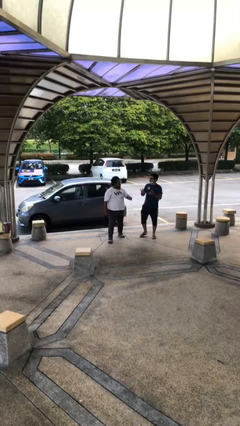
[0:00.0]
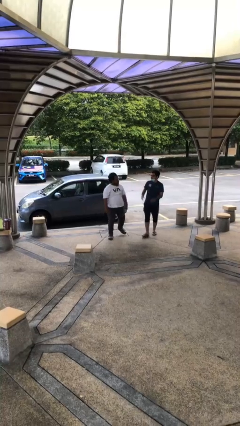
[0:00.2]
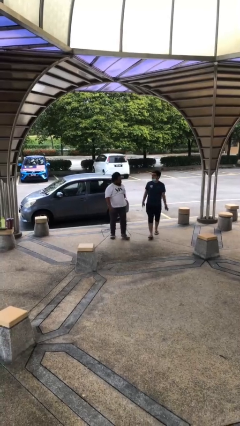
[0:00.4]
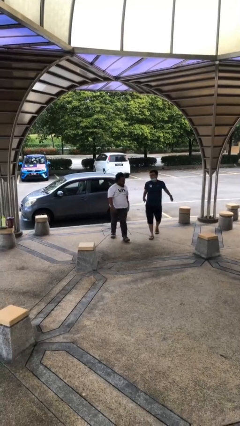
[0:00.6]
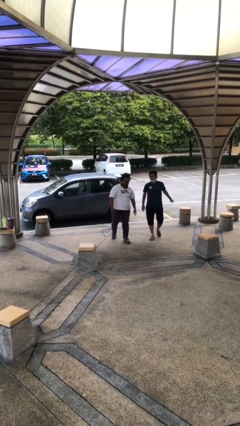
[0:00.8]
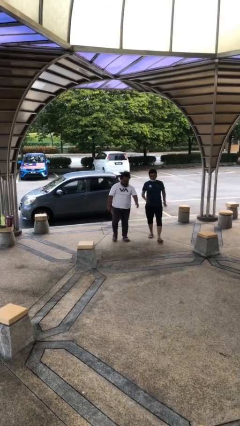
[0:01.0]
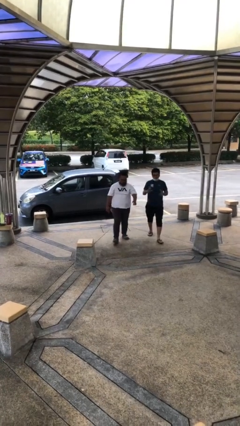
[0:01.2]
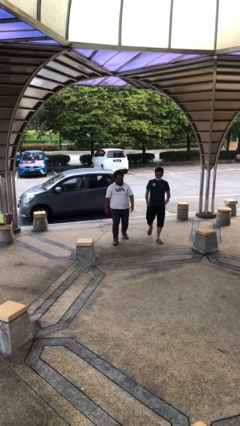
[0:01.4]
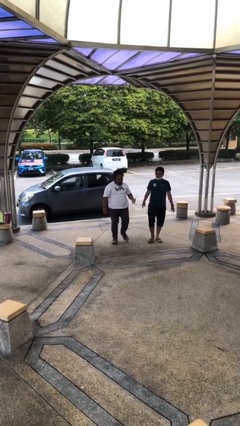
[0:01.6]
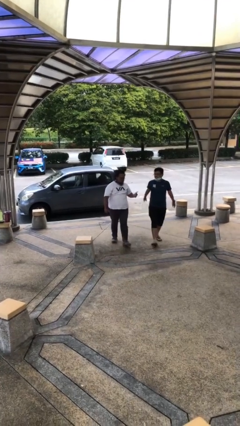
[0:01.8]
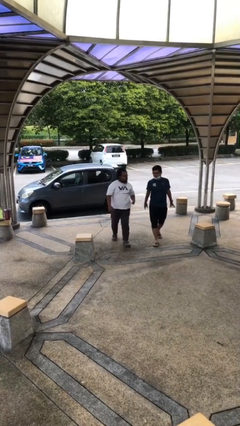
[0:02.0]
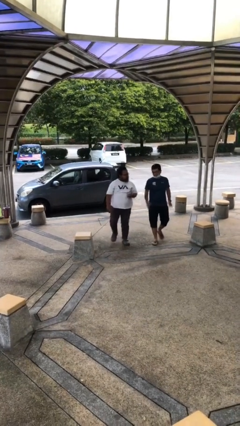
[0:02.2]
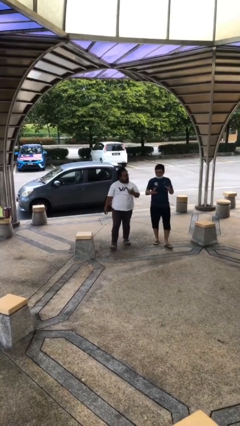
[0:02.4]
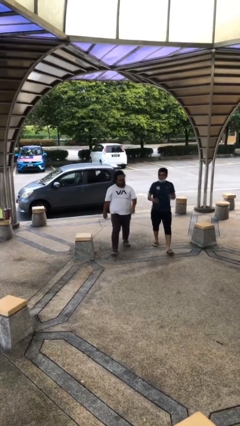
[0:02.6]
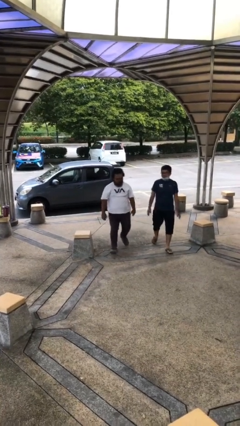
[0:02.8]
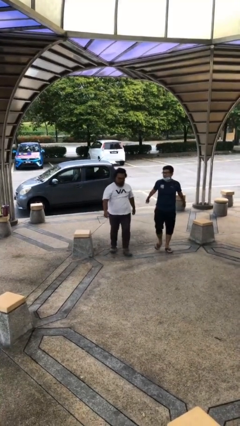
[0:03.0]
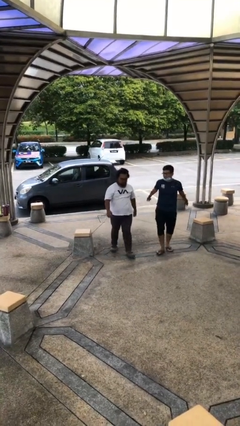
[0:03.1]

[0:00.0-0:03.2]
person talks to person

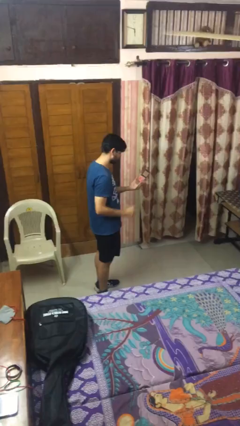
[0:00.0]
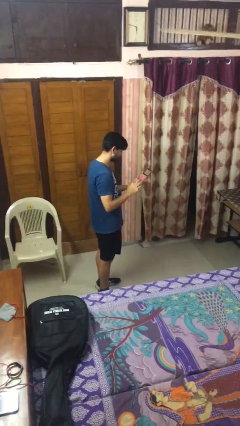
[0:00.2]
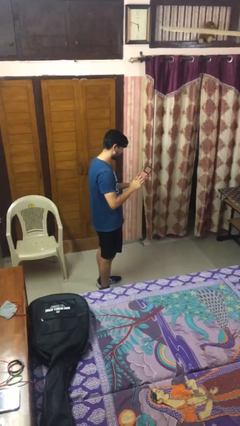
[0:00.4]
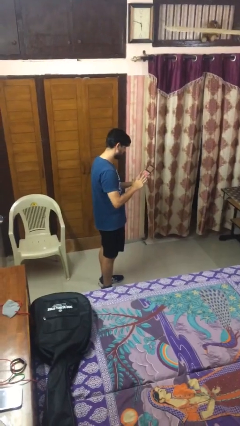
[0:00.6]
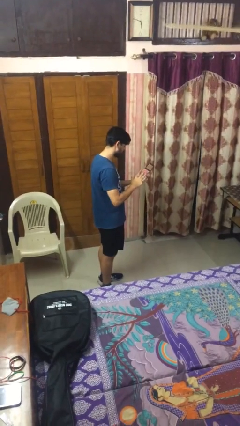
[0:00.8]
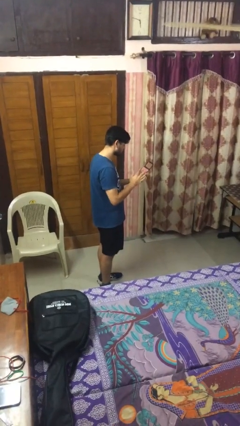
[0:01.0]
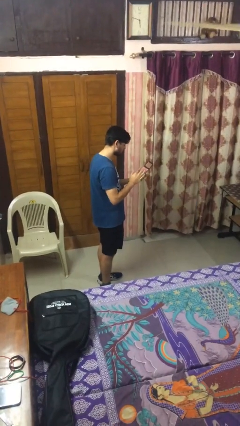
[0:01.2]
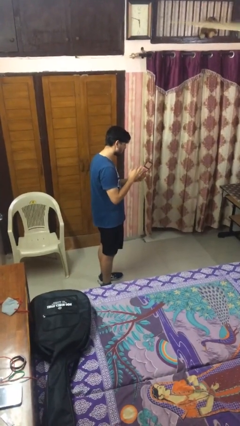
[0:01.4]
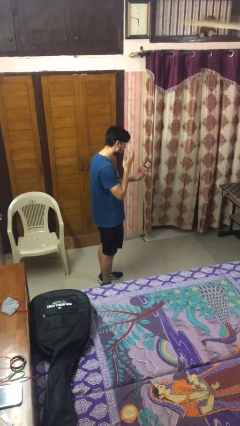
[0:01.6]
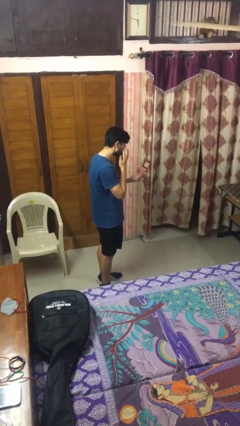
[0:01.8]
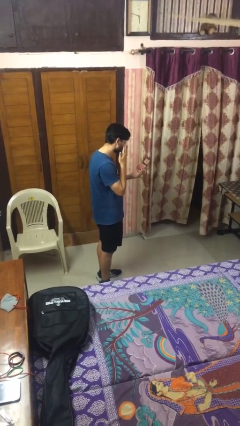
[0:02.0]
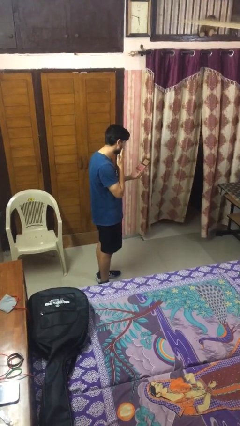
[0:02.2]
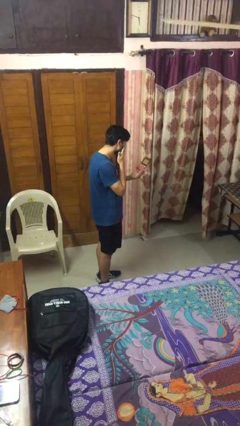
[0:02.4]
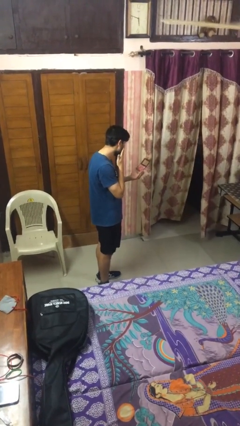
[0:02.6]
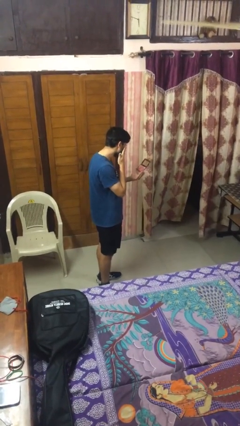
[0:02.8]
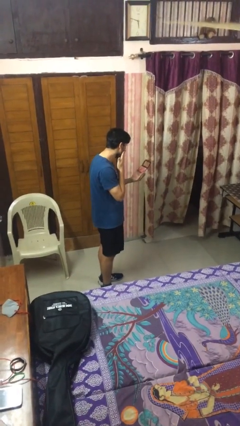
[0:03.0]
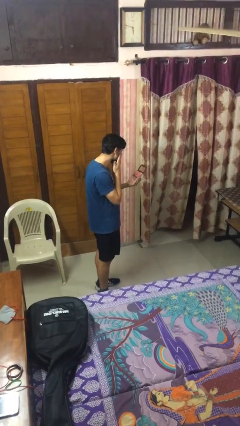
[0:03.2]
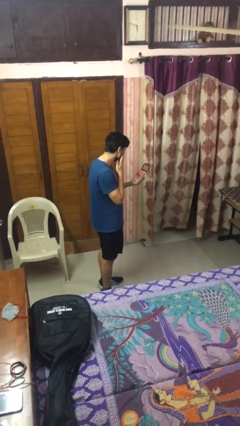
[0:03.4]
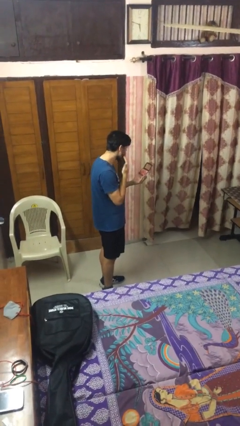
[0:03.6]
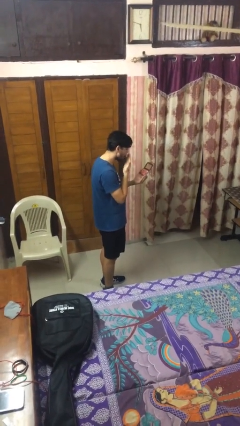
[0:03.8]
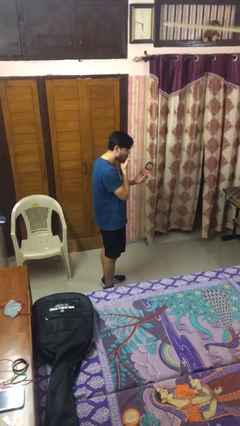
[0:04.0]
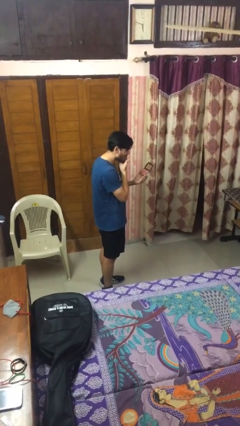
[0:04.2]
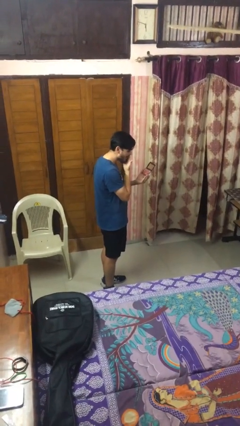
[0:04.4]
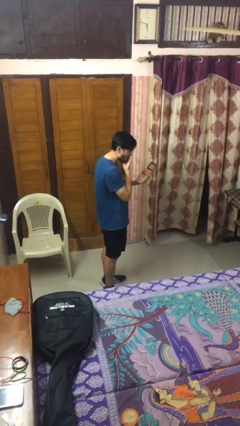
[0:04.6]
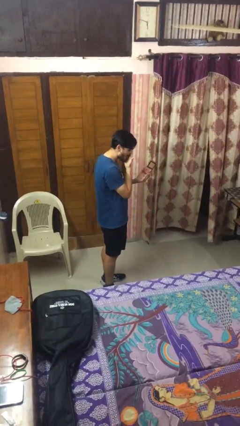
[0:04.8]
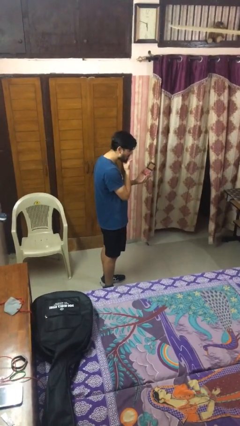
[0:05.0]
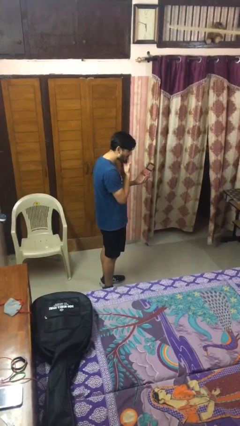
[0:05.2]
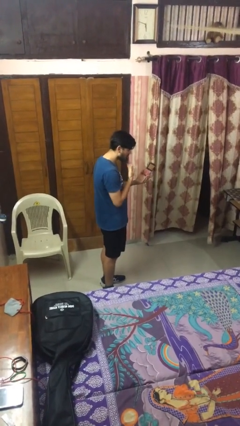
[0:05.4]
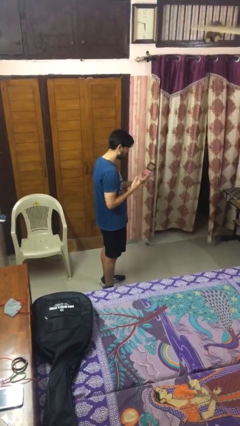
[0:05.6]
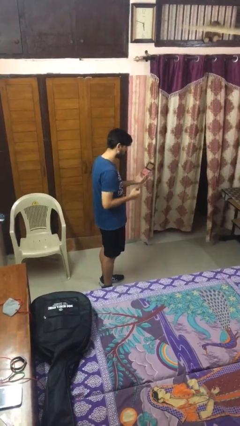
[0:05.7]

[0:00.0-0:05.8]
person applies foundation makeup

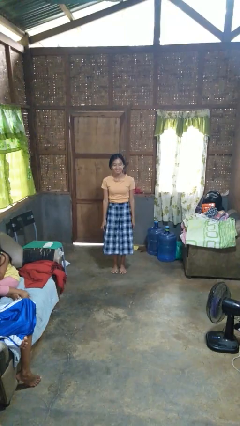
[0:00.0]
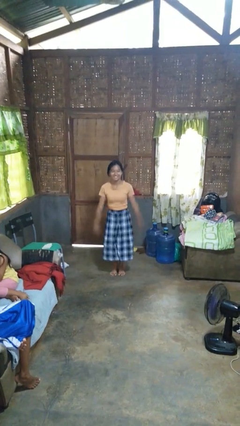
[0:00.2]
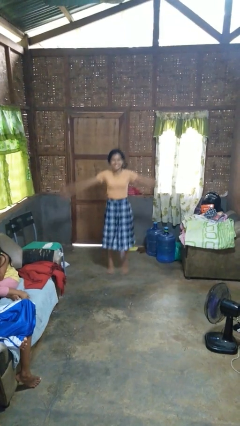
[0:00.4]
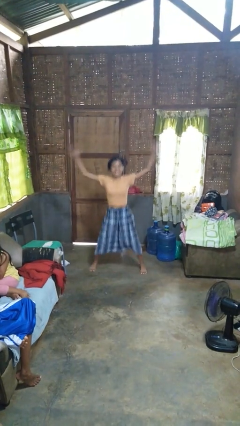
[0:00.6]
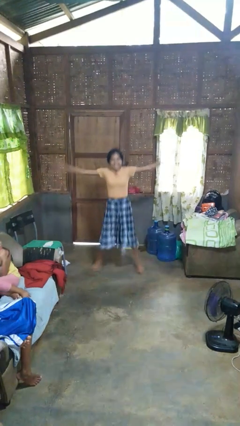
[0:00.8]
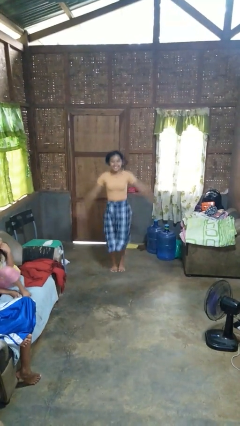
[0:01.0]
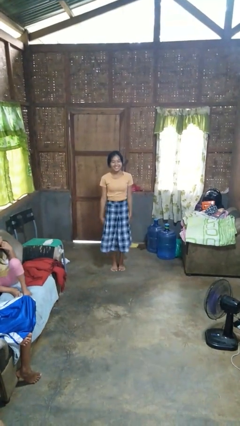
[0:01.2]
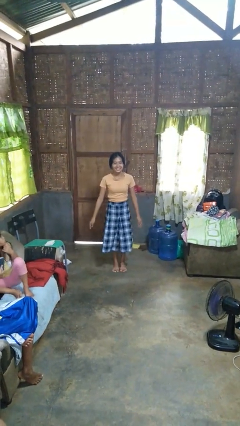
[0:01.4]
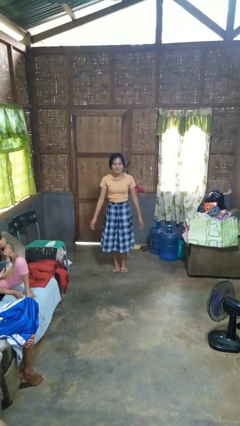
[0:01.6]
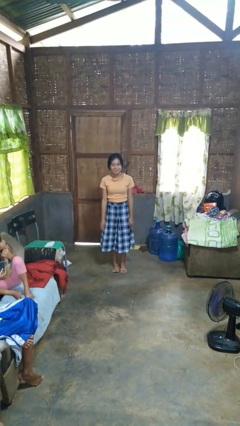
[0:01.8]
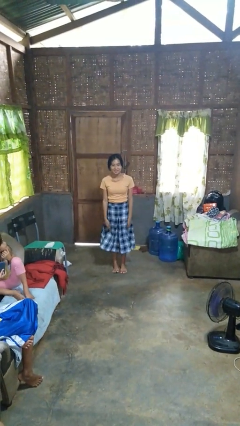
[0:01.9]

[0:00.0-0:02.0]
person exercises with jumping jacks

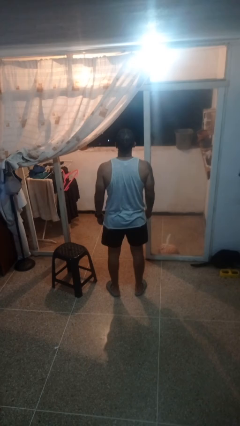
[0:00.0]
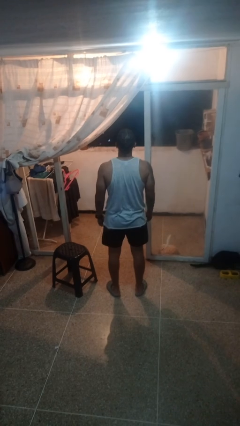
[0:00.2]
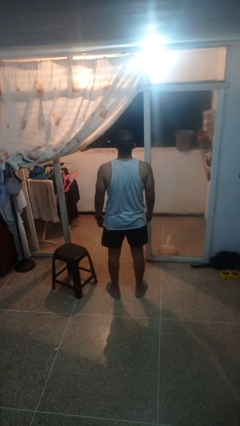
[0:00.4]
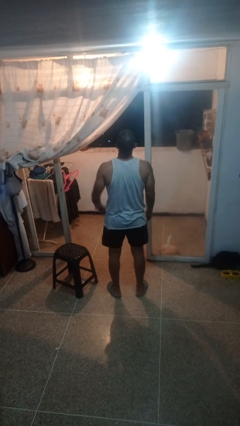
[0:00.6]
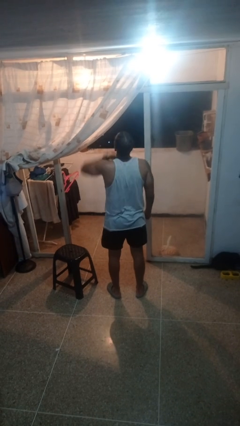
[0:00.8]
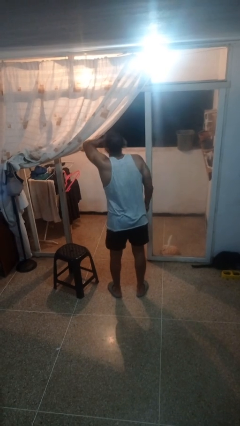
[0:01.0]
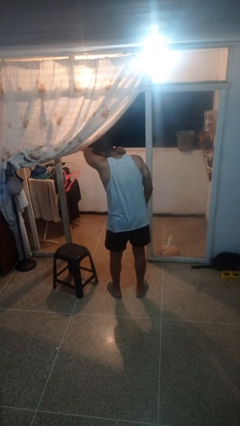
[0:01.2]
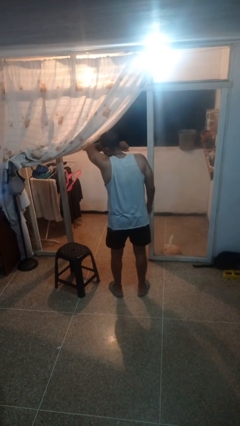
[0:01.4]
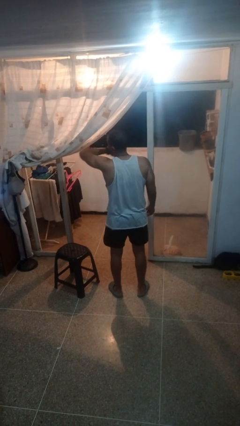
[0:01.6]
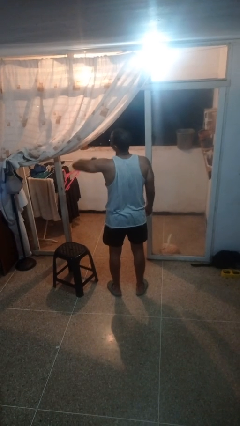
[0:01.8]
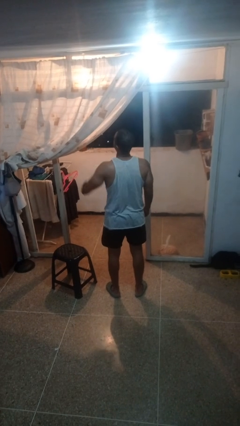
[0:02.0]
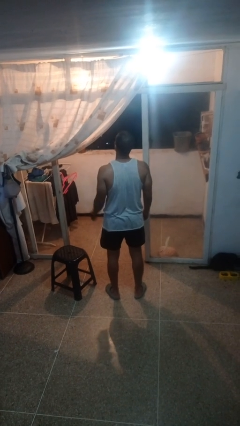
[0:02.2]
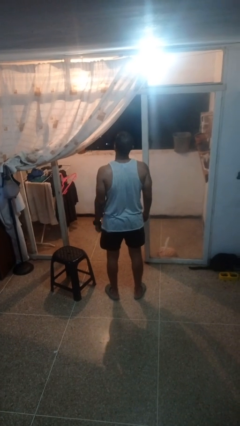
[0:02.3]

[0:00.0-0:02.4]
person sneezes into arm

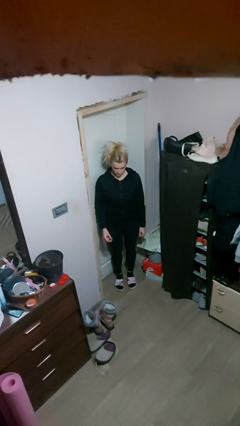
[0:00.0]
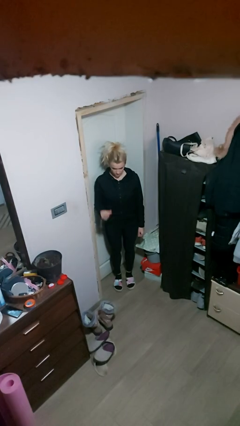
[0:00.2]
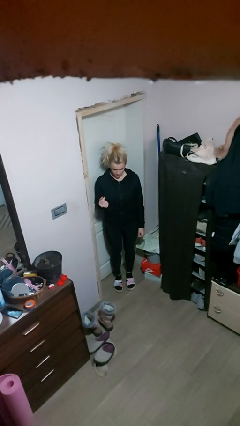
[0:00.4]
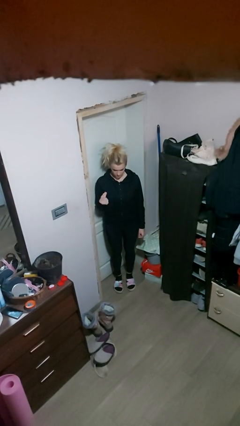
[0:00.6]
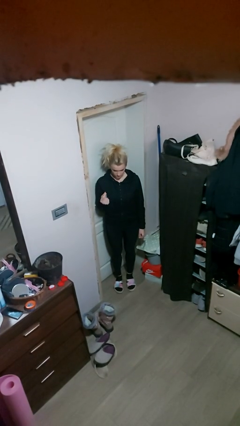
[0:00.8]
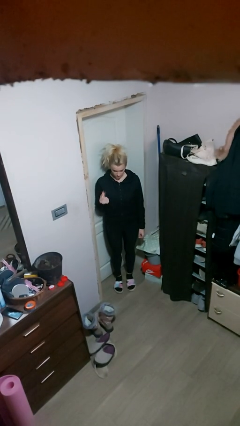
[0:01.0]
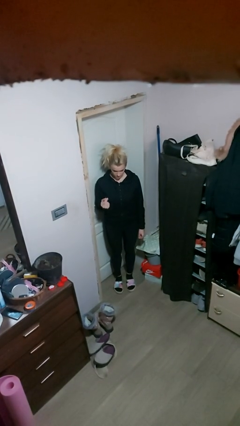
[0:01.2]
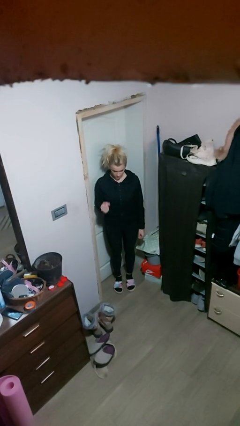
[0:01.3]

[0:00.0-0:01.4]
person snaps fingers

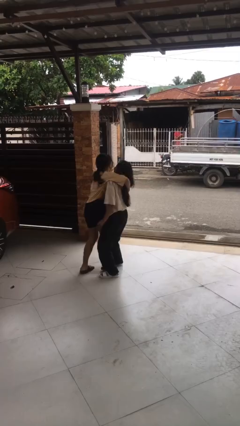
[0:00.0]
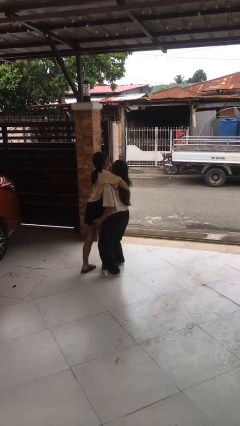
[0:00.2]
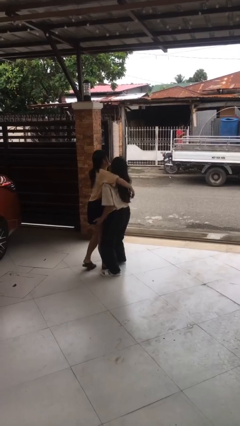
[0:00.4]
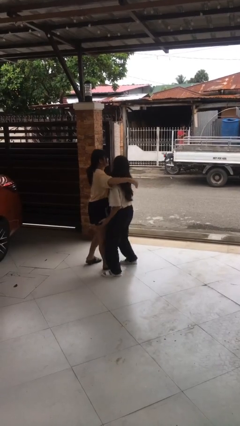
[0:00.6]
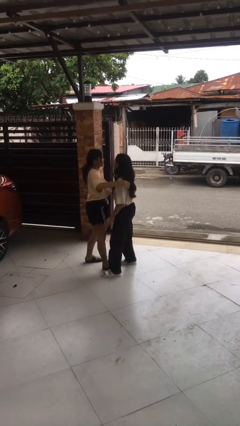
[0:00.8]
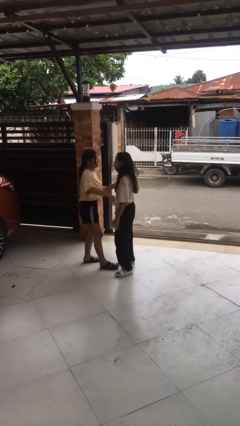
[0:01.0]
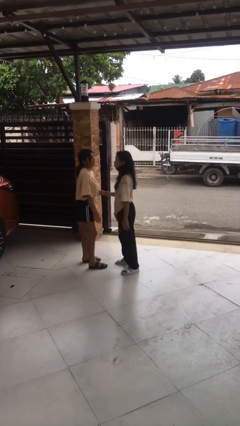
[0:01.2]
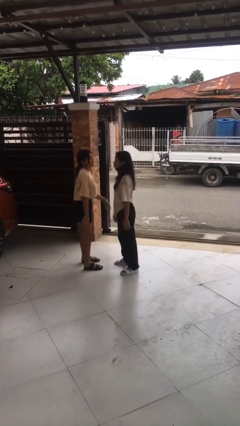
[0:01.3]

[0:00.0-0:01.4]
person puts down person

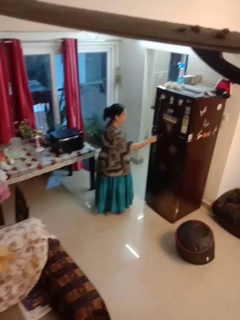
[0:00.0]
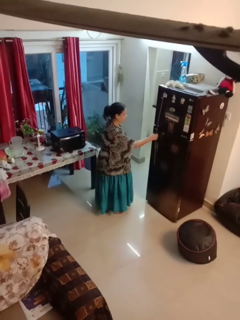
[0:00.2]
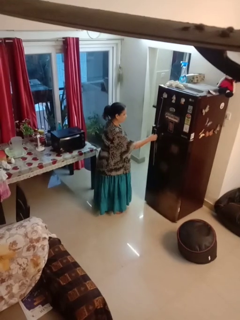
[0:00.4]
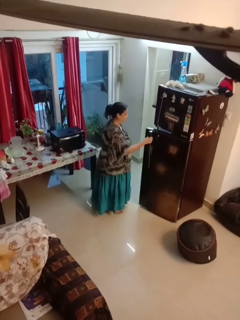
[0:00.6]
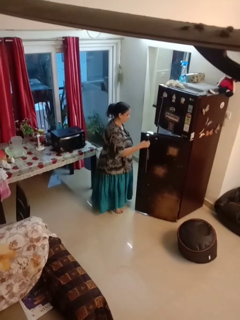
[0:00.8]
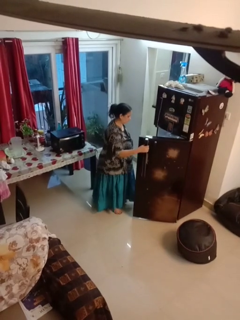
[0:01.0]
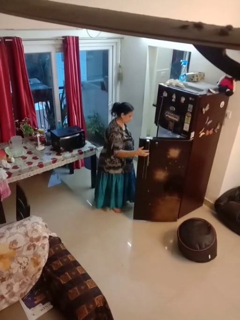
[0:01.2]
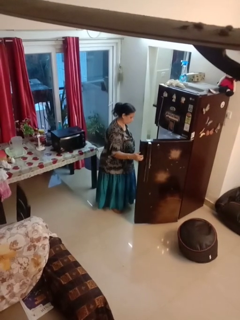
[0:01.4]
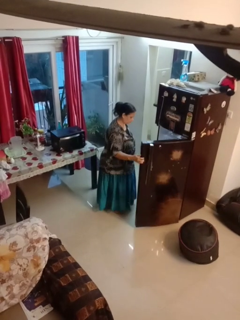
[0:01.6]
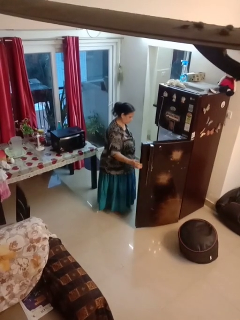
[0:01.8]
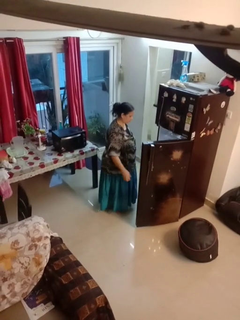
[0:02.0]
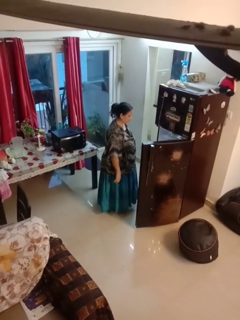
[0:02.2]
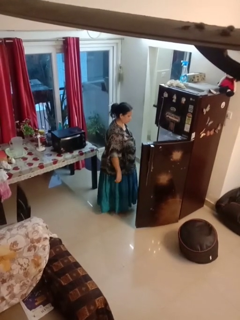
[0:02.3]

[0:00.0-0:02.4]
person opens refrigerator
